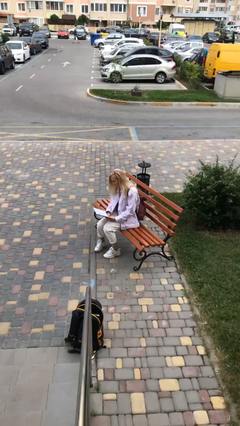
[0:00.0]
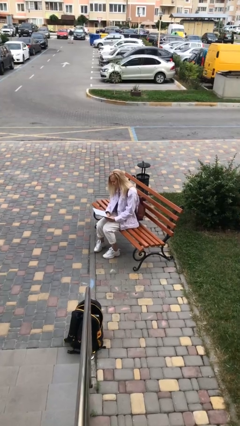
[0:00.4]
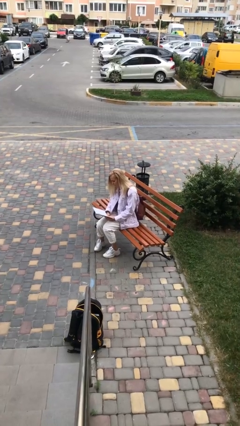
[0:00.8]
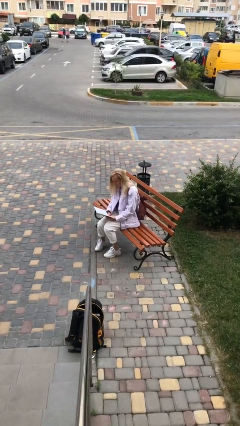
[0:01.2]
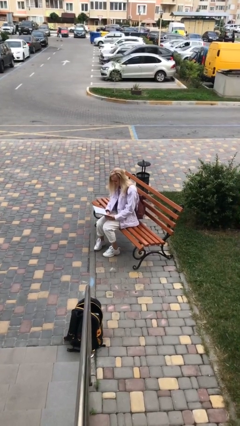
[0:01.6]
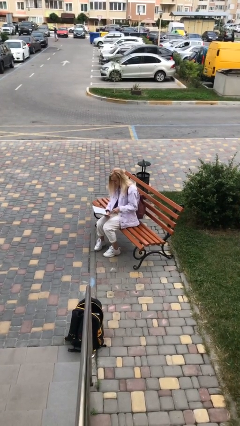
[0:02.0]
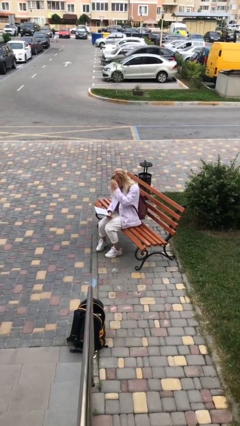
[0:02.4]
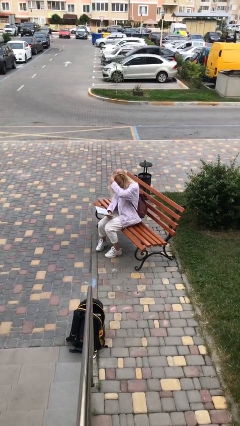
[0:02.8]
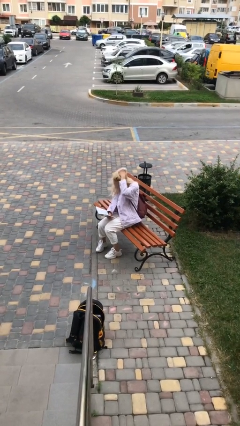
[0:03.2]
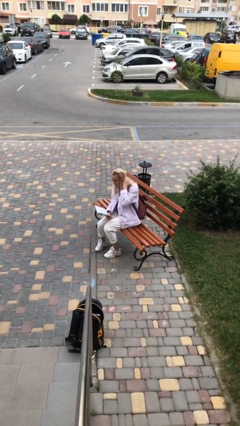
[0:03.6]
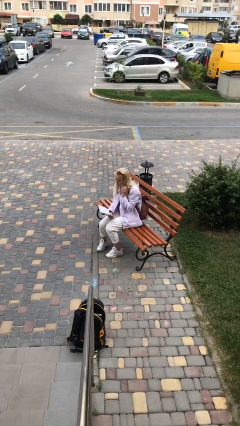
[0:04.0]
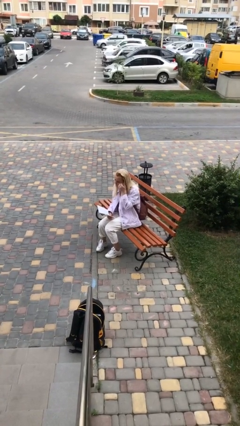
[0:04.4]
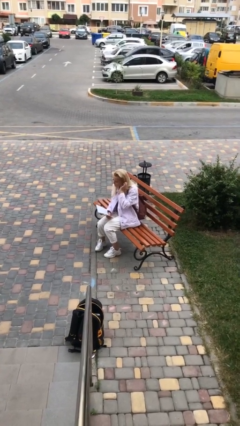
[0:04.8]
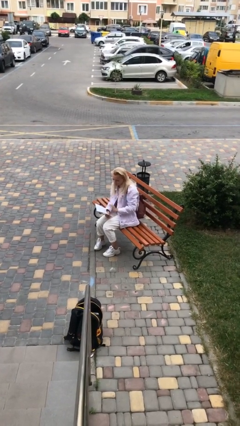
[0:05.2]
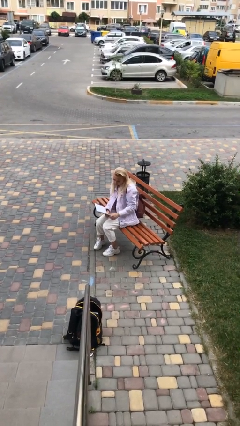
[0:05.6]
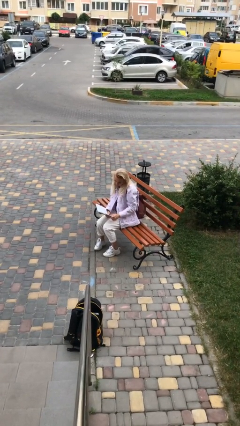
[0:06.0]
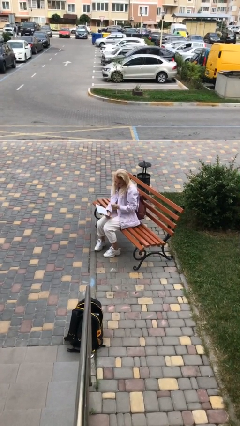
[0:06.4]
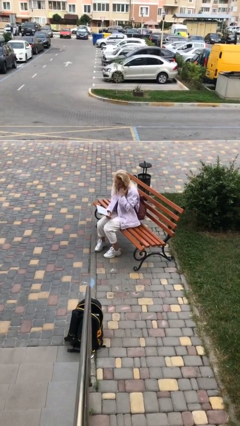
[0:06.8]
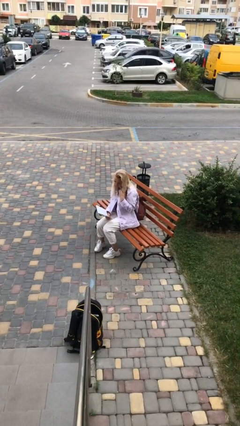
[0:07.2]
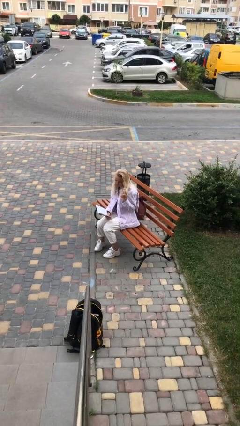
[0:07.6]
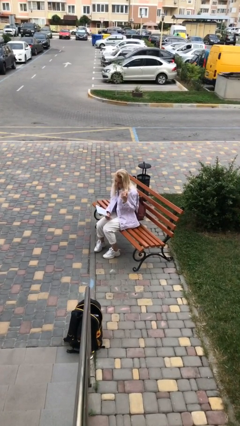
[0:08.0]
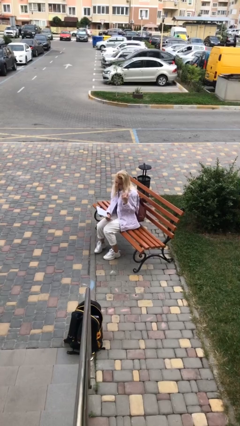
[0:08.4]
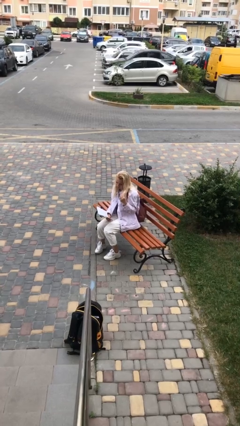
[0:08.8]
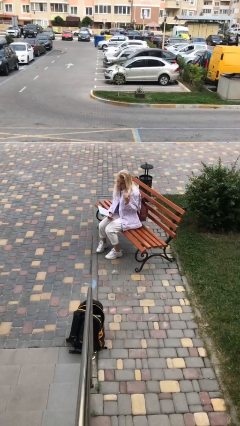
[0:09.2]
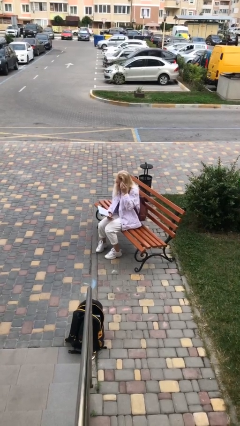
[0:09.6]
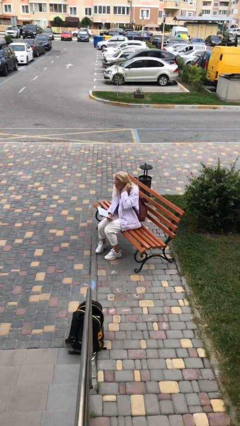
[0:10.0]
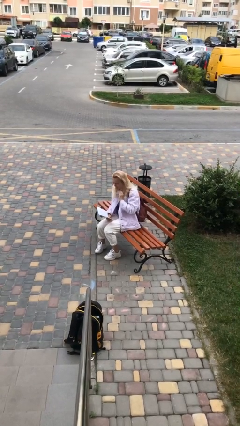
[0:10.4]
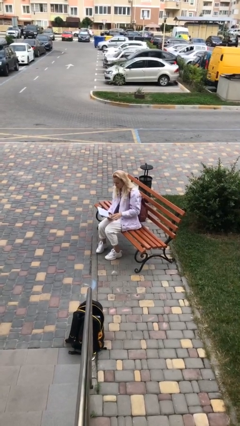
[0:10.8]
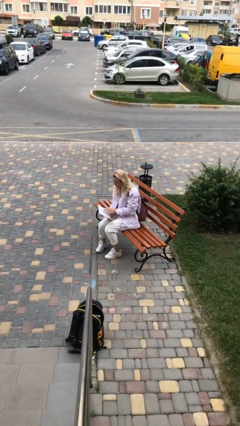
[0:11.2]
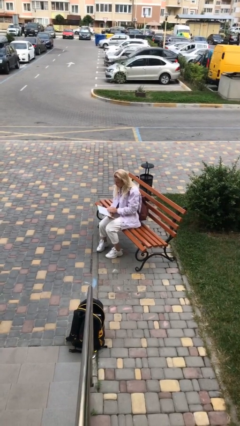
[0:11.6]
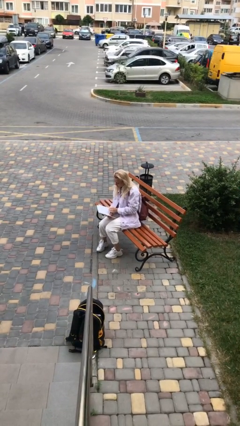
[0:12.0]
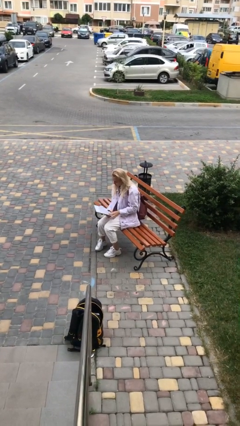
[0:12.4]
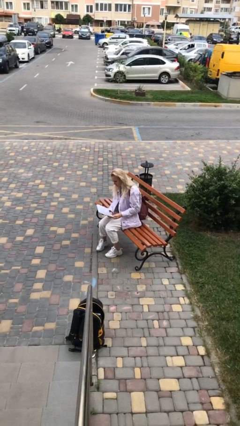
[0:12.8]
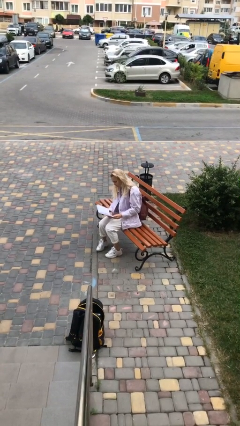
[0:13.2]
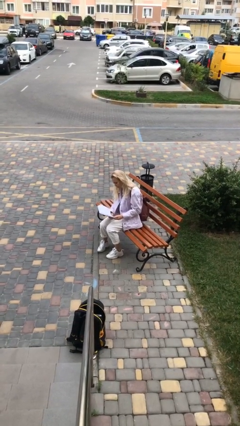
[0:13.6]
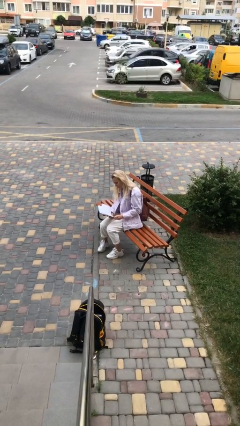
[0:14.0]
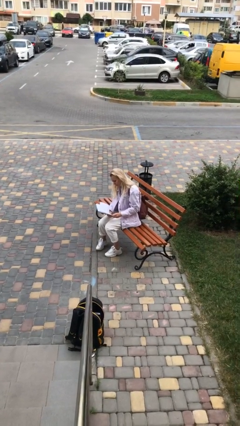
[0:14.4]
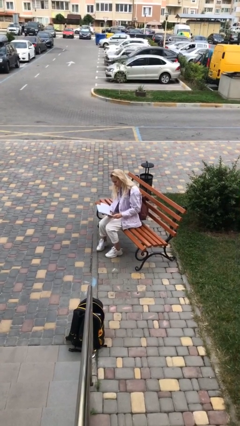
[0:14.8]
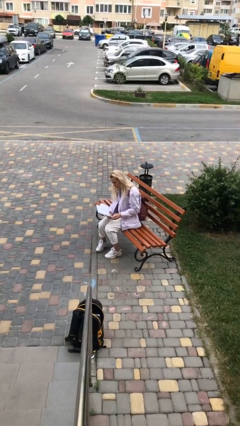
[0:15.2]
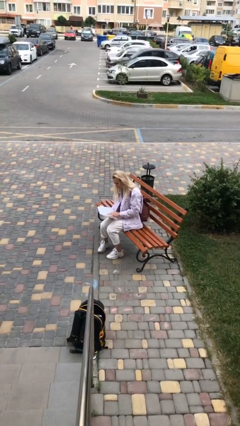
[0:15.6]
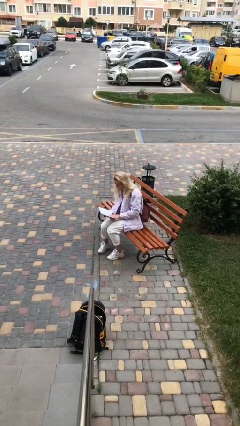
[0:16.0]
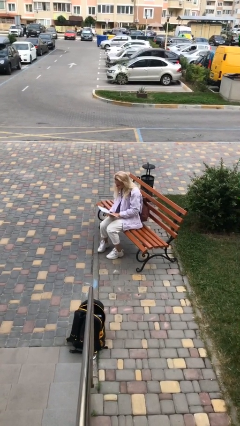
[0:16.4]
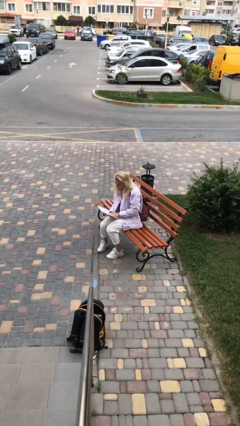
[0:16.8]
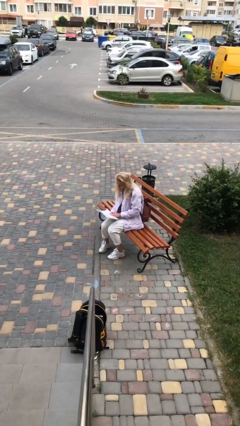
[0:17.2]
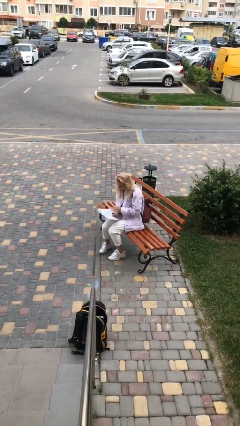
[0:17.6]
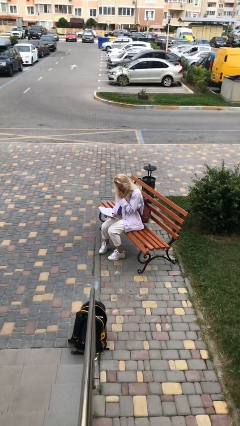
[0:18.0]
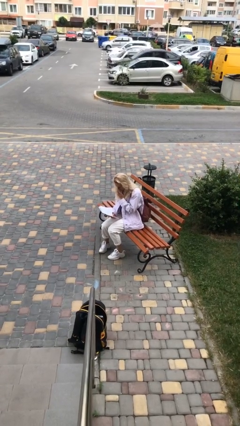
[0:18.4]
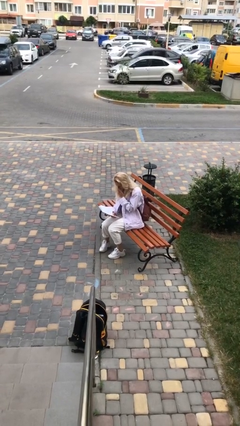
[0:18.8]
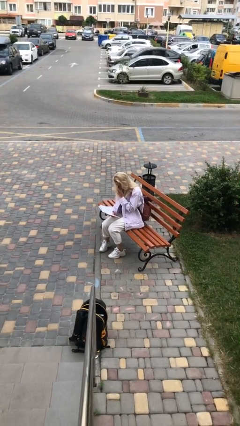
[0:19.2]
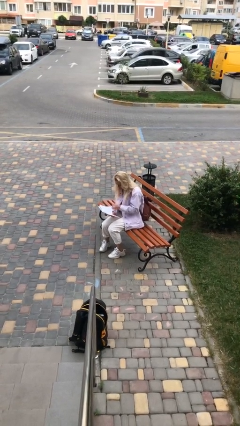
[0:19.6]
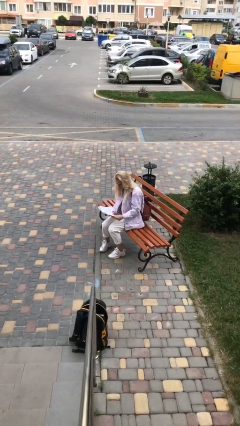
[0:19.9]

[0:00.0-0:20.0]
person reads document

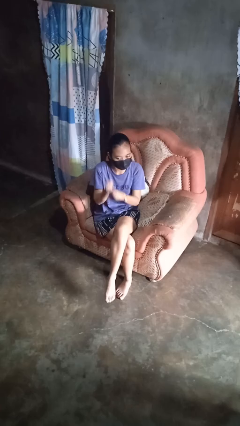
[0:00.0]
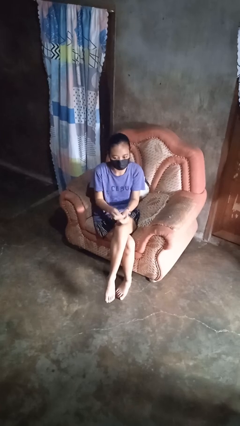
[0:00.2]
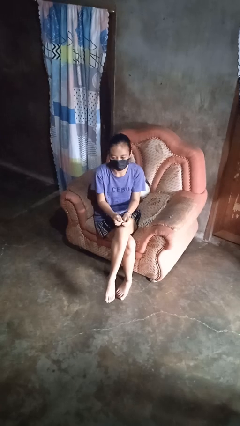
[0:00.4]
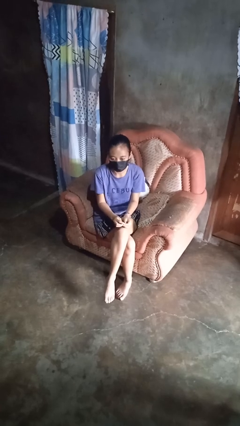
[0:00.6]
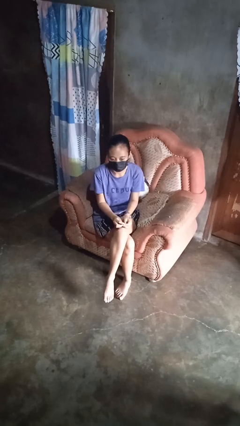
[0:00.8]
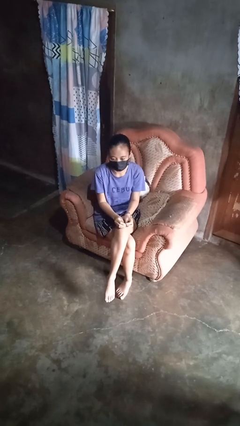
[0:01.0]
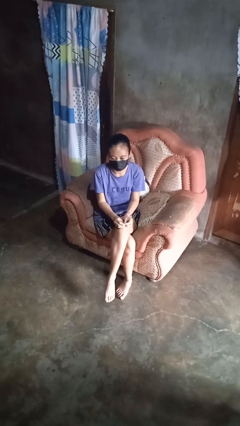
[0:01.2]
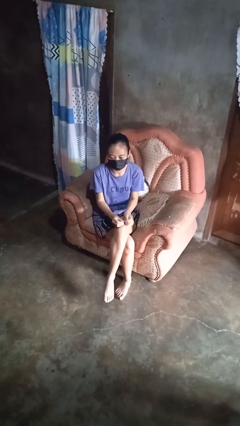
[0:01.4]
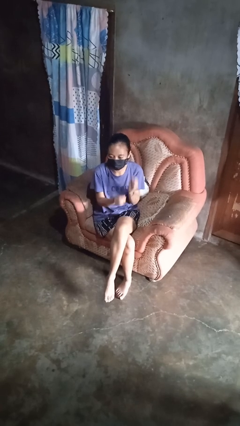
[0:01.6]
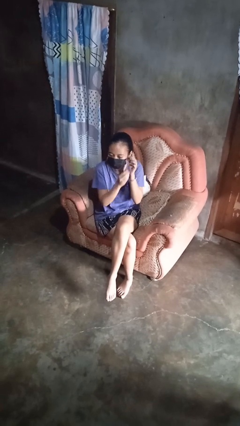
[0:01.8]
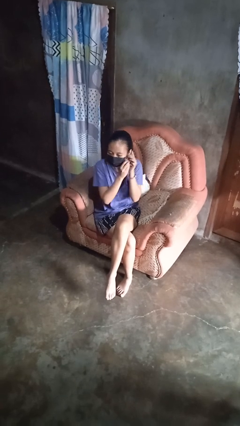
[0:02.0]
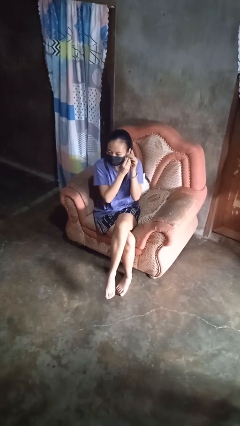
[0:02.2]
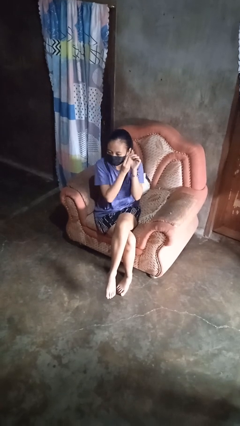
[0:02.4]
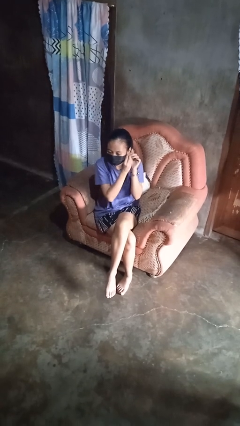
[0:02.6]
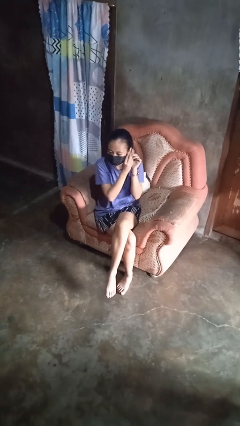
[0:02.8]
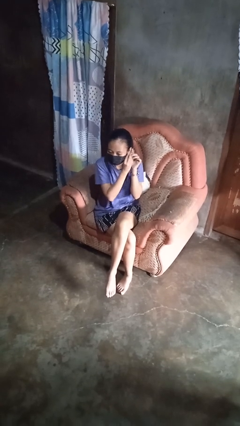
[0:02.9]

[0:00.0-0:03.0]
person puts on earrings

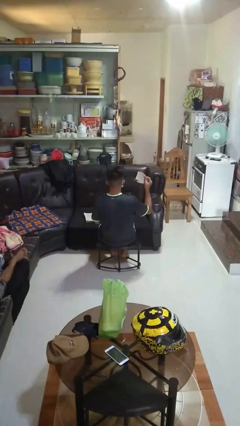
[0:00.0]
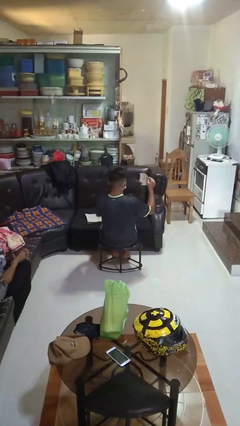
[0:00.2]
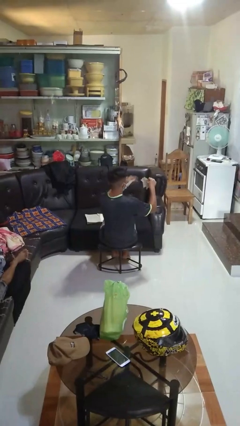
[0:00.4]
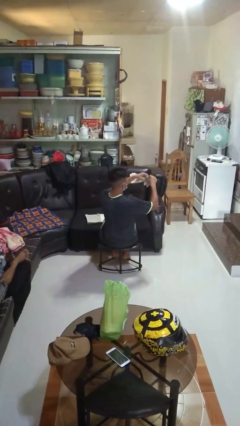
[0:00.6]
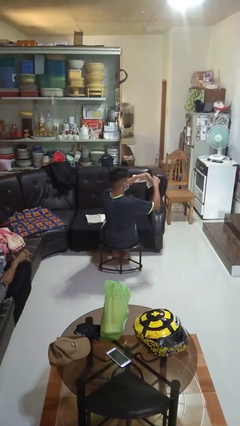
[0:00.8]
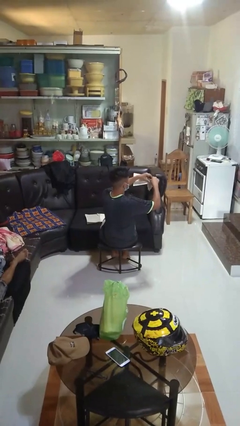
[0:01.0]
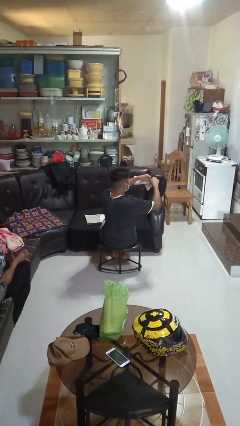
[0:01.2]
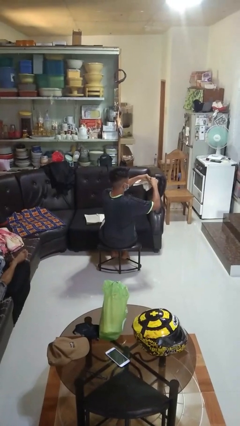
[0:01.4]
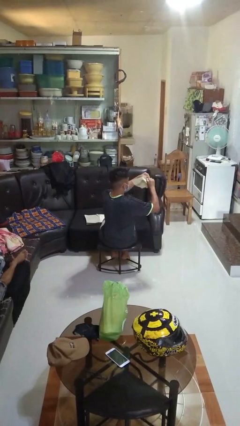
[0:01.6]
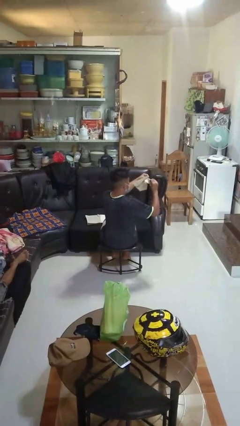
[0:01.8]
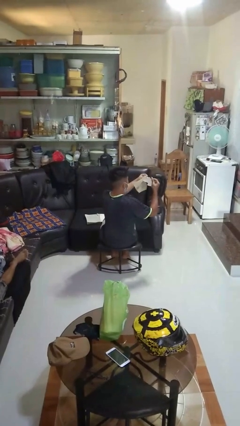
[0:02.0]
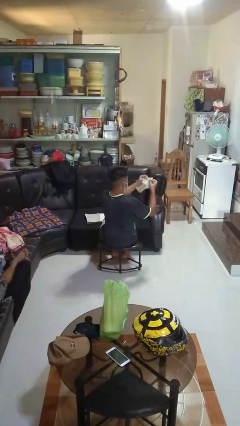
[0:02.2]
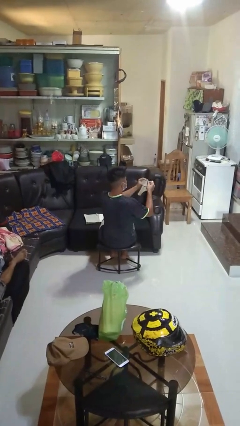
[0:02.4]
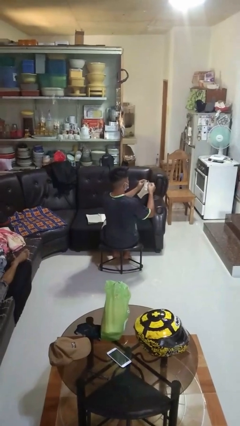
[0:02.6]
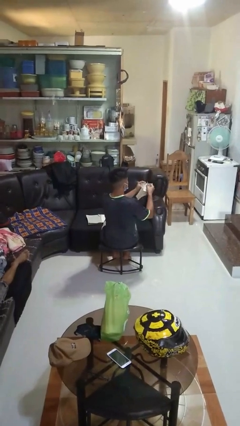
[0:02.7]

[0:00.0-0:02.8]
person tears paper

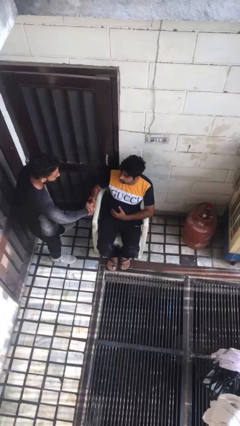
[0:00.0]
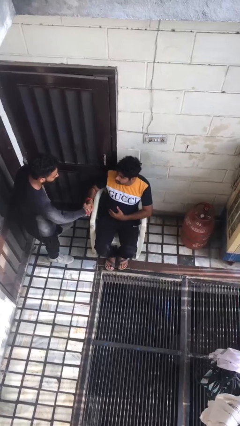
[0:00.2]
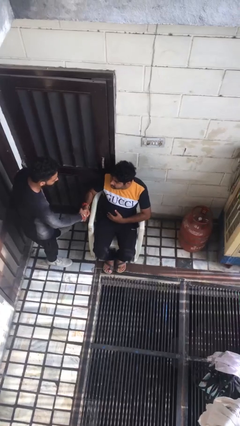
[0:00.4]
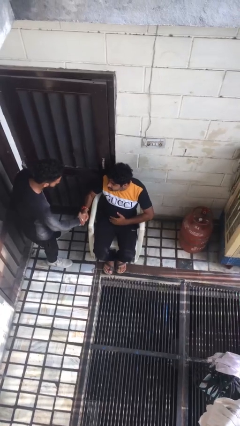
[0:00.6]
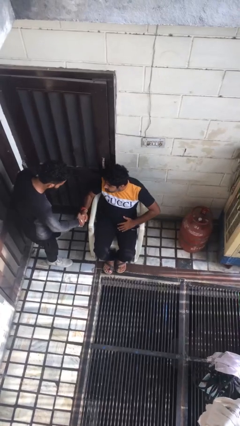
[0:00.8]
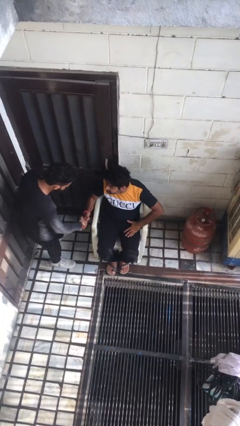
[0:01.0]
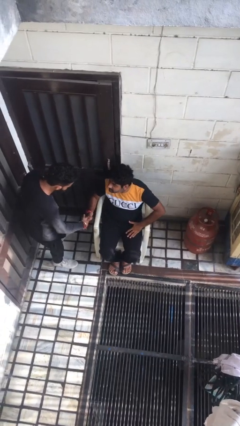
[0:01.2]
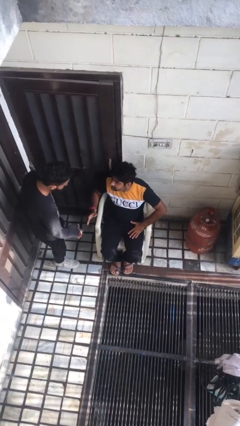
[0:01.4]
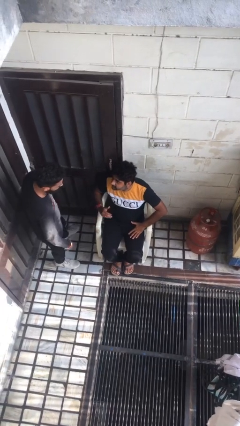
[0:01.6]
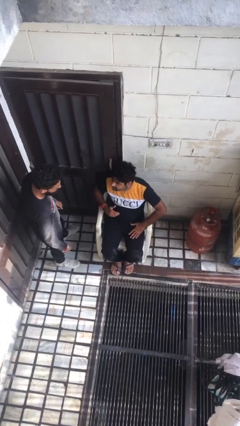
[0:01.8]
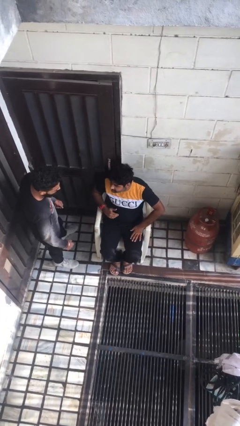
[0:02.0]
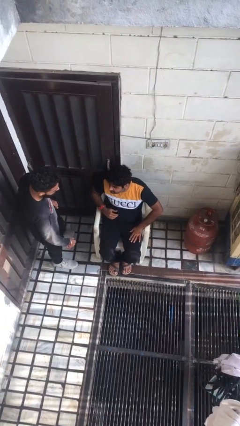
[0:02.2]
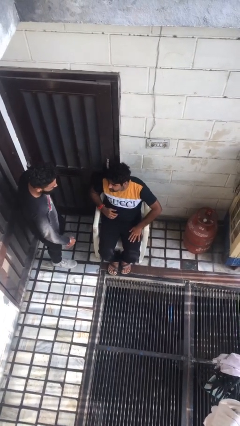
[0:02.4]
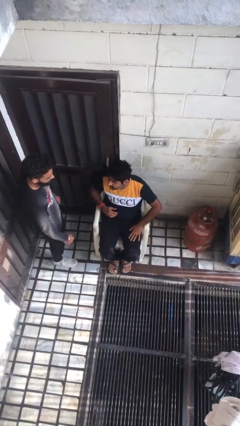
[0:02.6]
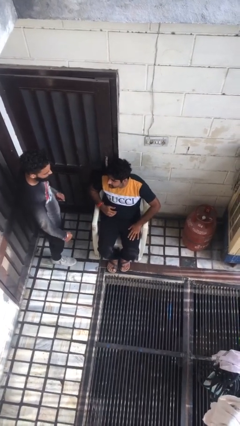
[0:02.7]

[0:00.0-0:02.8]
person shakes hand
